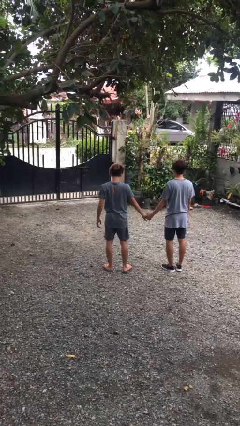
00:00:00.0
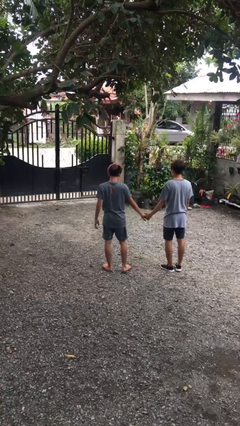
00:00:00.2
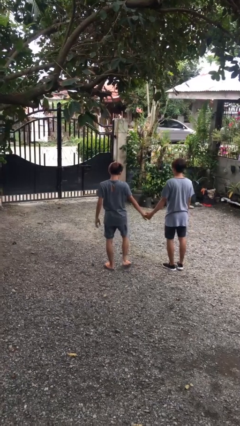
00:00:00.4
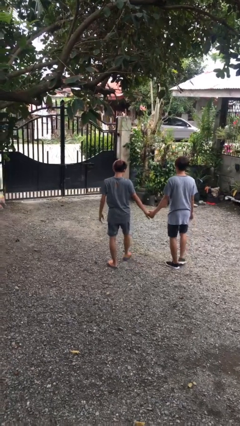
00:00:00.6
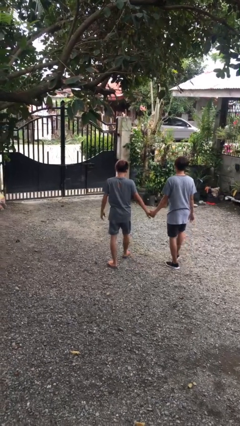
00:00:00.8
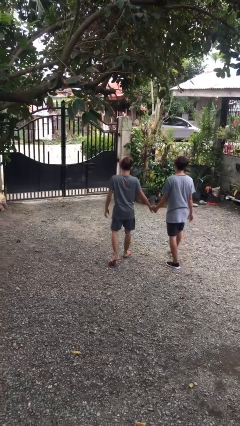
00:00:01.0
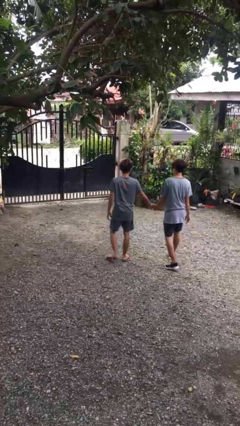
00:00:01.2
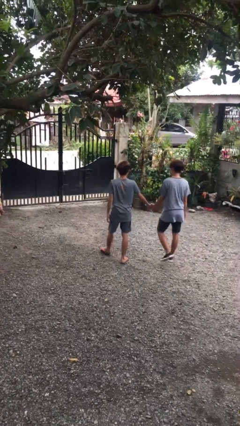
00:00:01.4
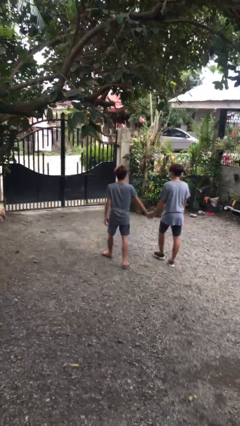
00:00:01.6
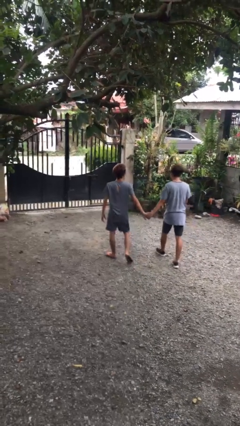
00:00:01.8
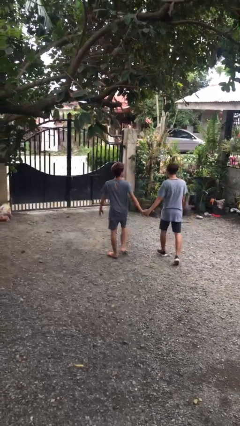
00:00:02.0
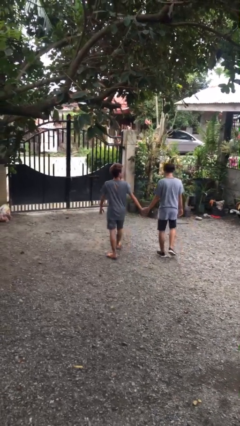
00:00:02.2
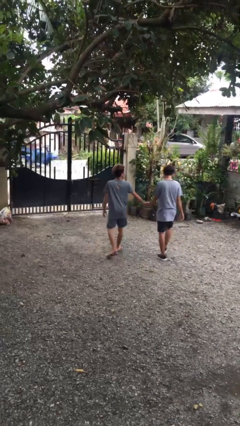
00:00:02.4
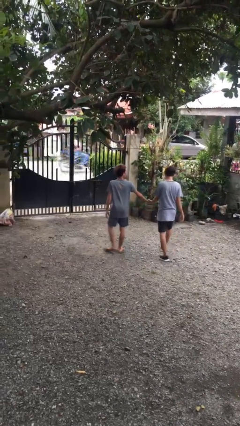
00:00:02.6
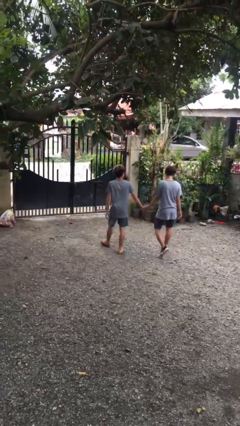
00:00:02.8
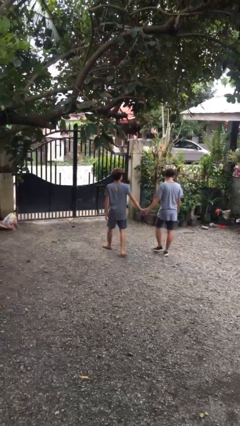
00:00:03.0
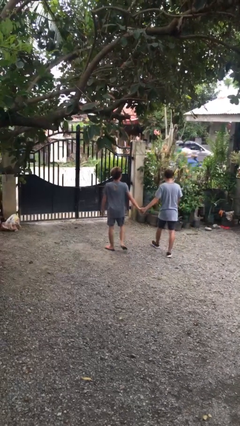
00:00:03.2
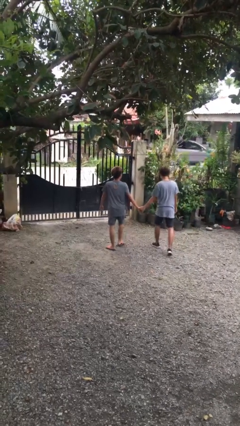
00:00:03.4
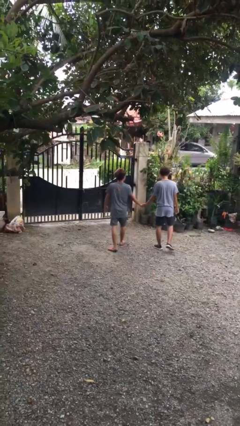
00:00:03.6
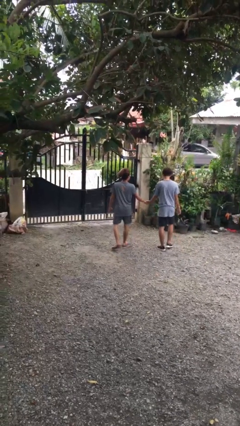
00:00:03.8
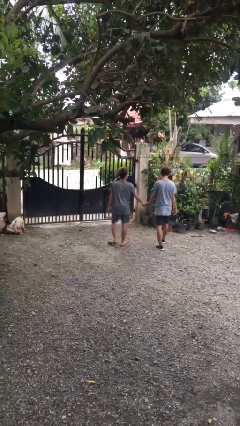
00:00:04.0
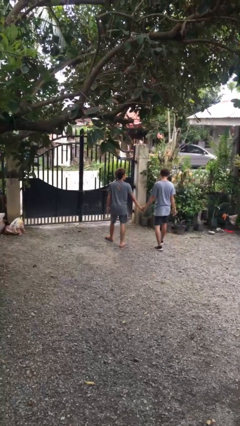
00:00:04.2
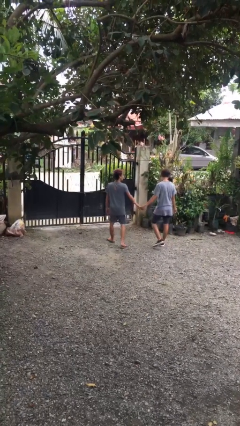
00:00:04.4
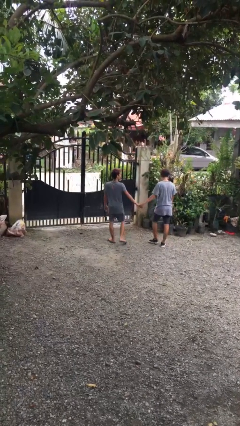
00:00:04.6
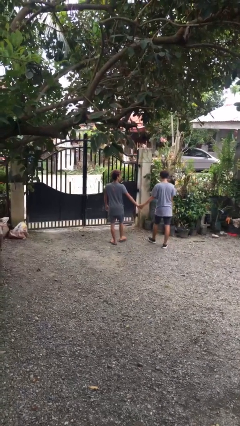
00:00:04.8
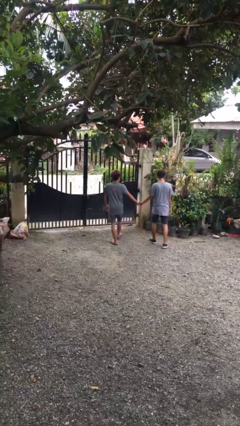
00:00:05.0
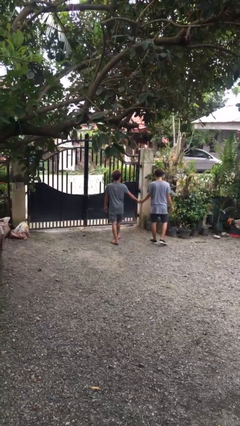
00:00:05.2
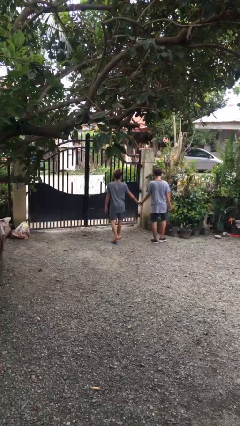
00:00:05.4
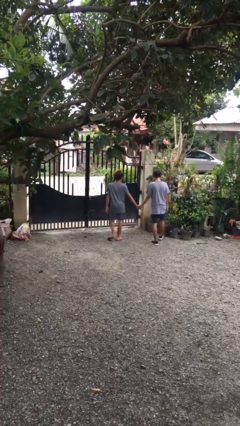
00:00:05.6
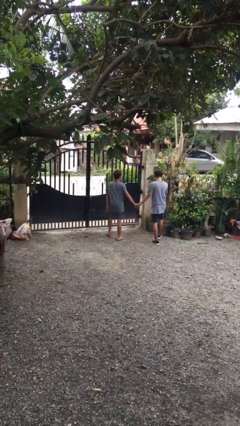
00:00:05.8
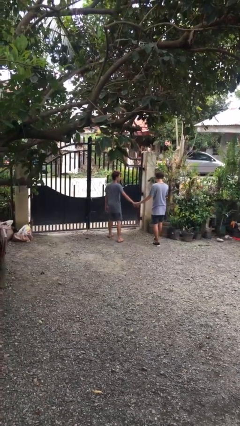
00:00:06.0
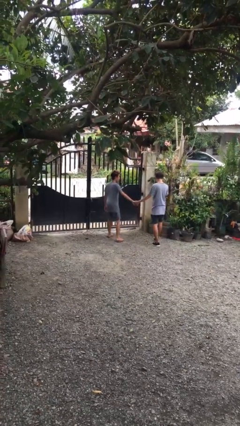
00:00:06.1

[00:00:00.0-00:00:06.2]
person holds hand

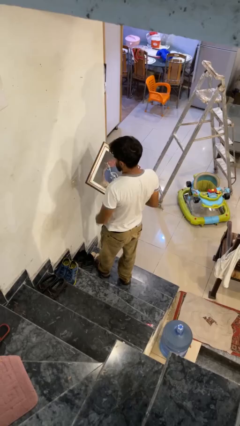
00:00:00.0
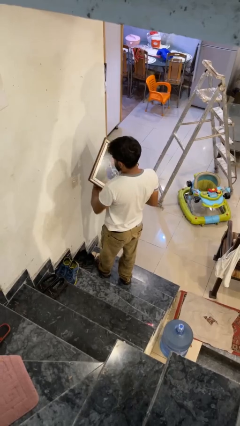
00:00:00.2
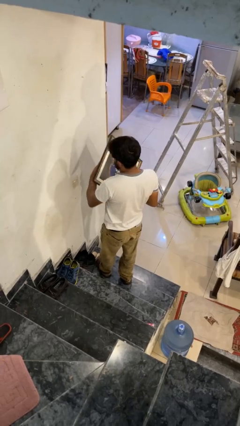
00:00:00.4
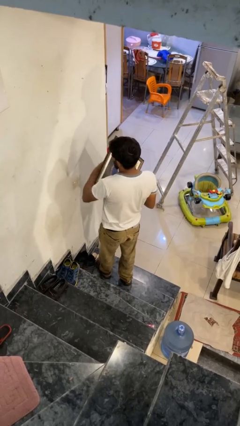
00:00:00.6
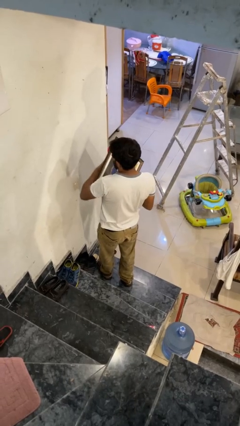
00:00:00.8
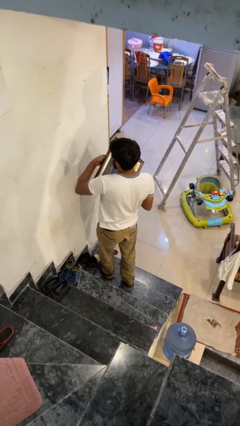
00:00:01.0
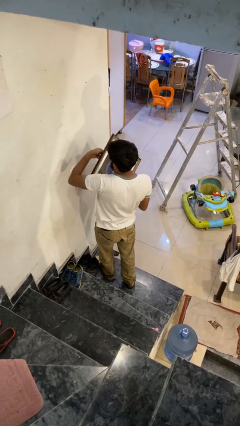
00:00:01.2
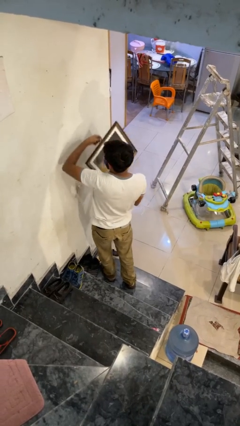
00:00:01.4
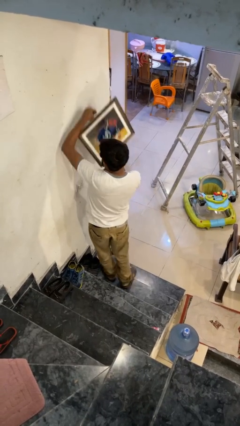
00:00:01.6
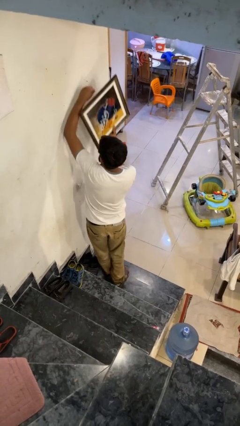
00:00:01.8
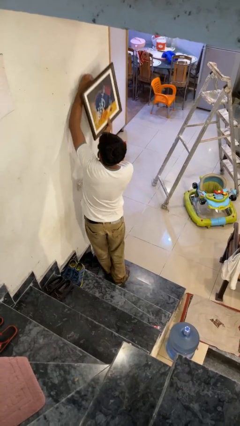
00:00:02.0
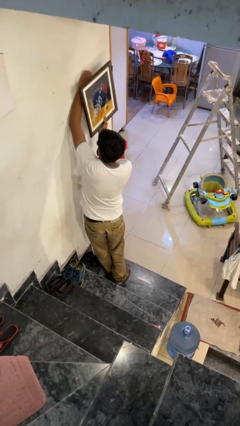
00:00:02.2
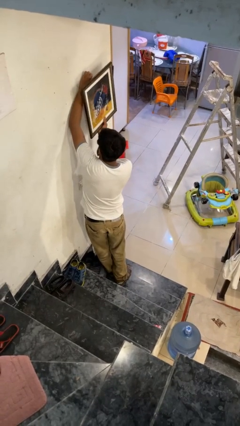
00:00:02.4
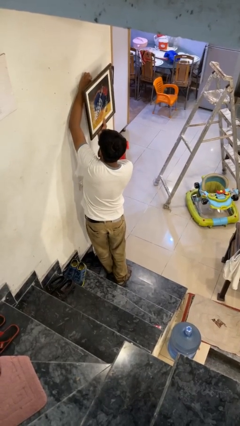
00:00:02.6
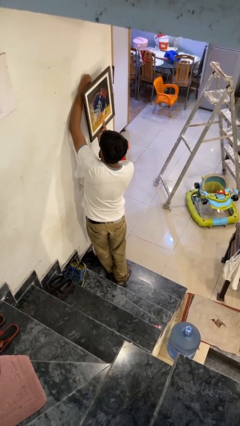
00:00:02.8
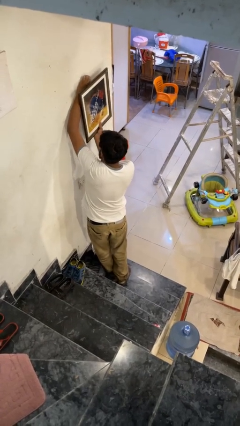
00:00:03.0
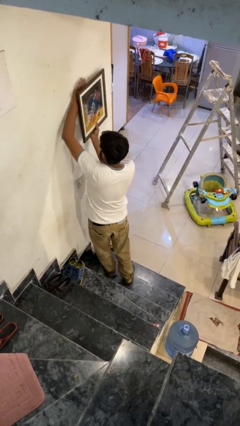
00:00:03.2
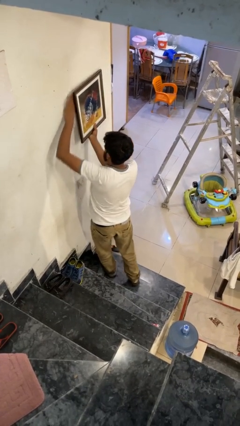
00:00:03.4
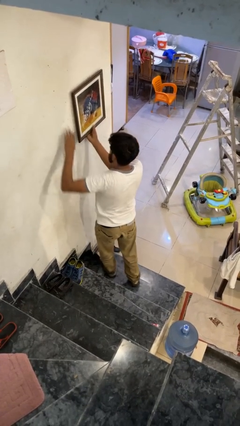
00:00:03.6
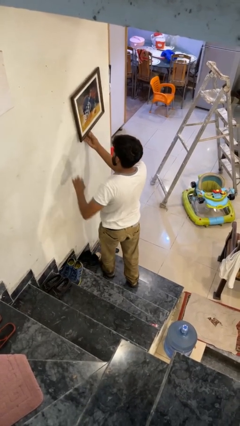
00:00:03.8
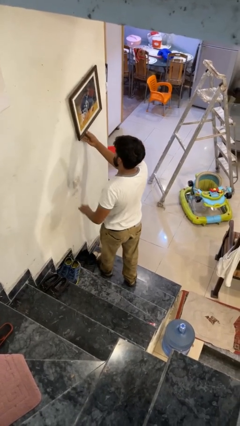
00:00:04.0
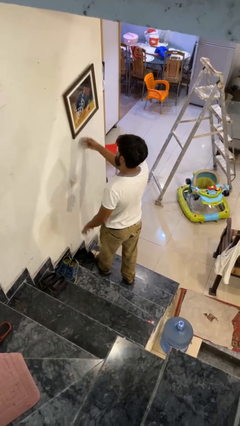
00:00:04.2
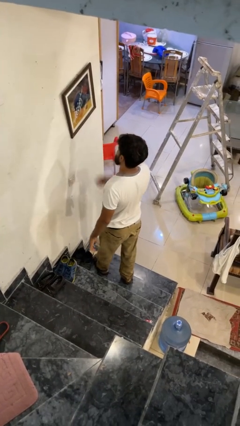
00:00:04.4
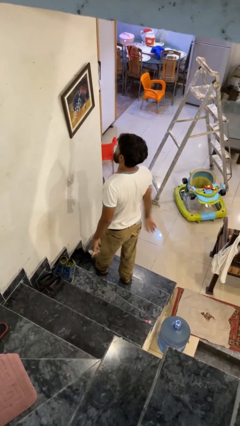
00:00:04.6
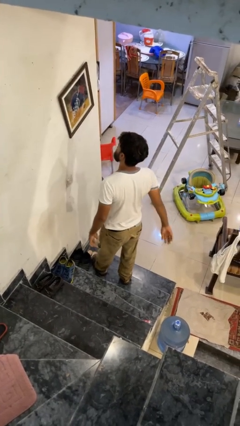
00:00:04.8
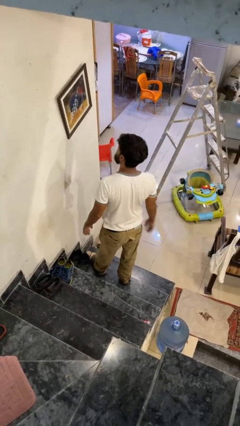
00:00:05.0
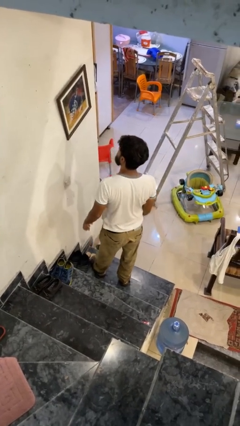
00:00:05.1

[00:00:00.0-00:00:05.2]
person puts up picture frame

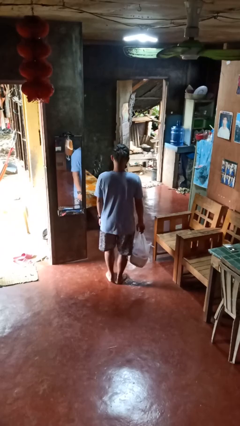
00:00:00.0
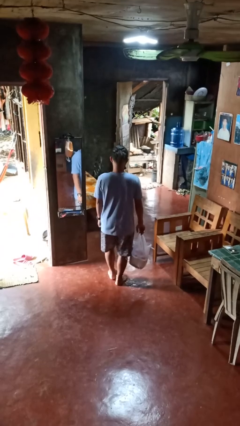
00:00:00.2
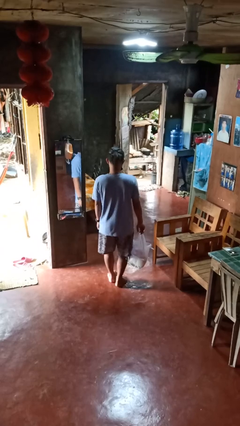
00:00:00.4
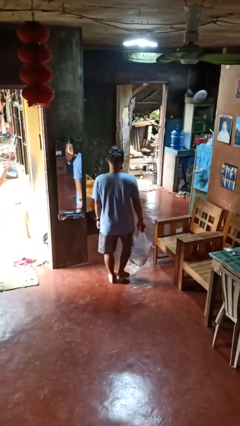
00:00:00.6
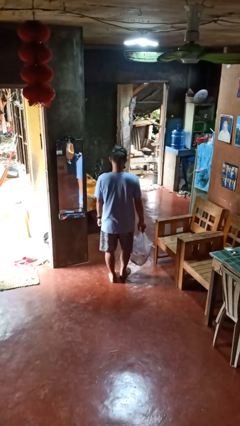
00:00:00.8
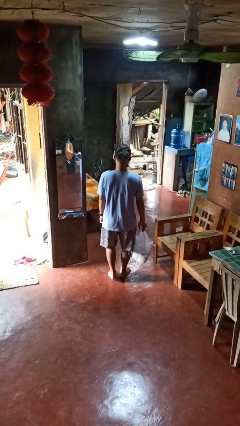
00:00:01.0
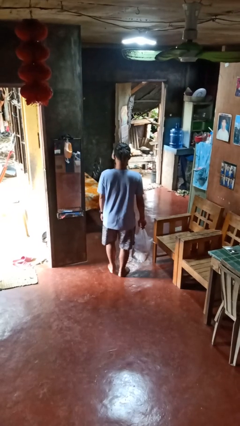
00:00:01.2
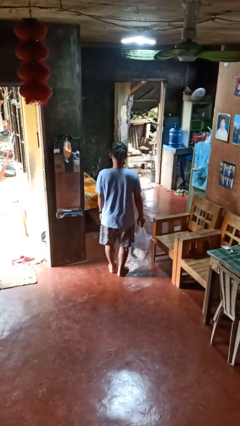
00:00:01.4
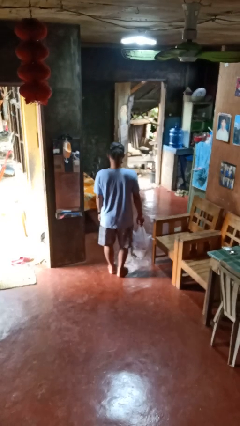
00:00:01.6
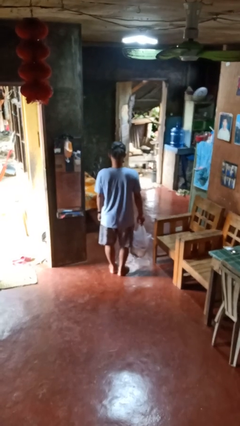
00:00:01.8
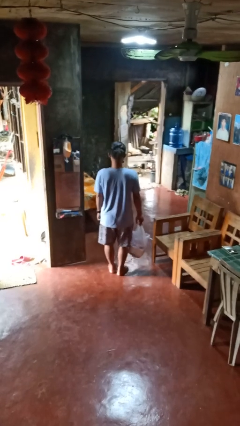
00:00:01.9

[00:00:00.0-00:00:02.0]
person carries groceries

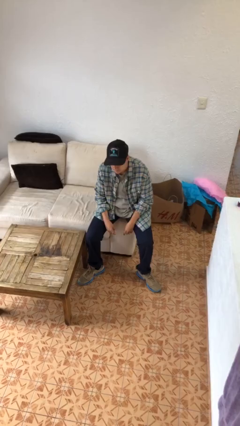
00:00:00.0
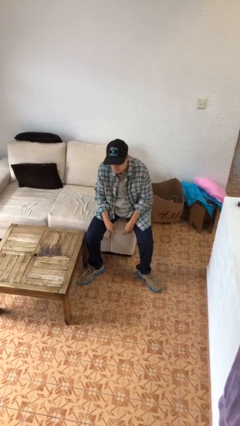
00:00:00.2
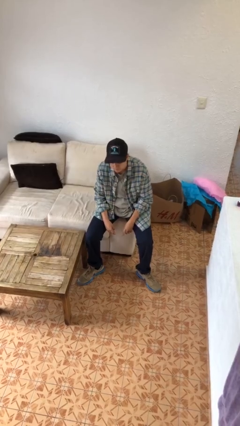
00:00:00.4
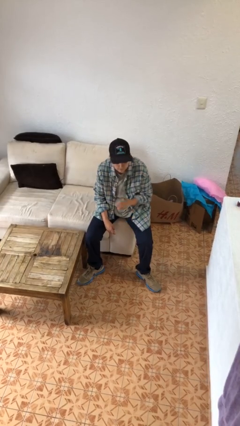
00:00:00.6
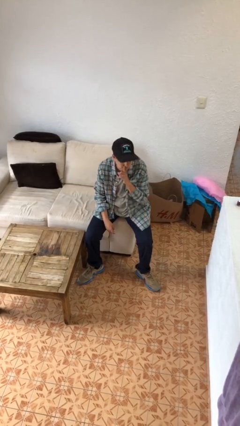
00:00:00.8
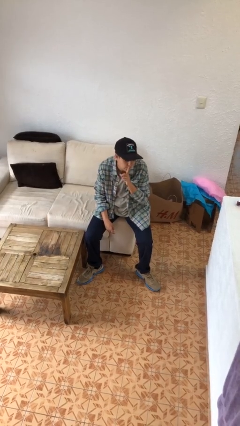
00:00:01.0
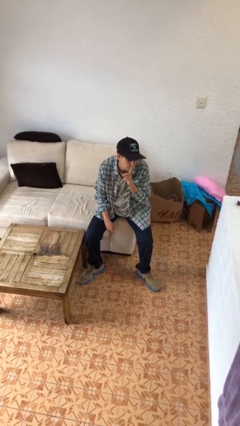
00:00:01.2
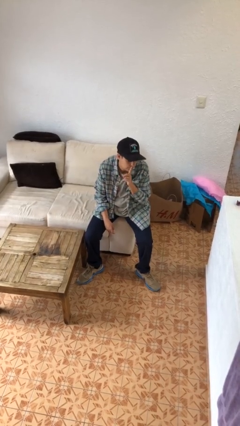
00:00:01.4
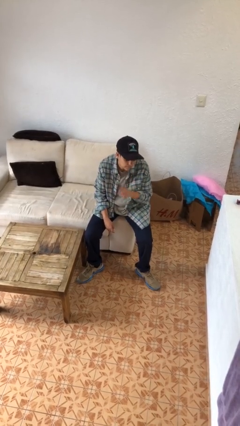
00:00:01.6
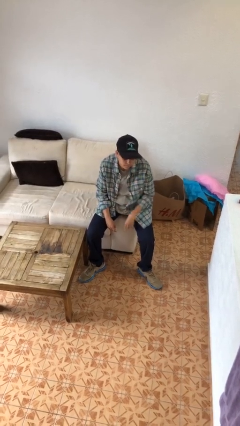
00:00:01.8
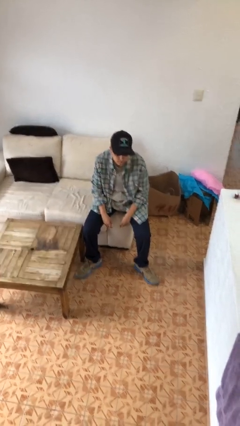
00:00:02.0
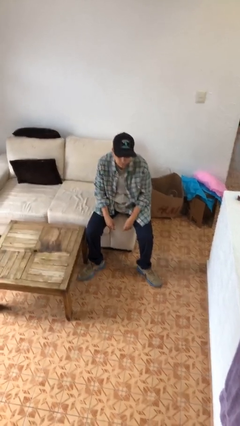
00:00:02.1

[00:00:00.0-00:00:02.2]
person gestures be quiet

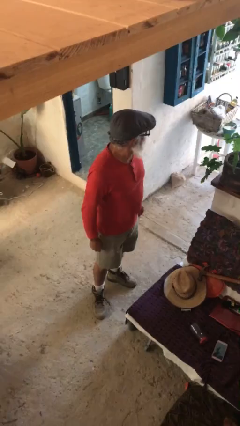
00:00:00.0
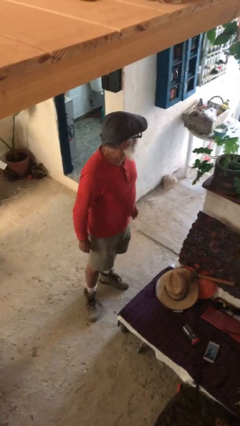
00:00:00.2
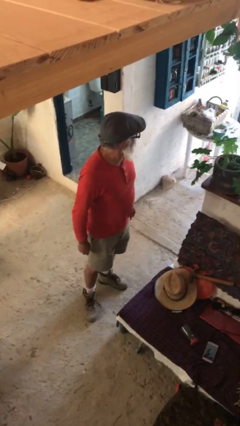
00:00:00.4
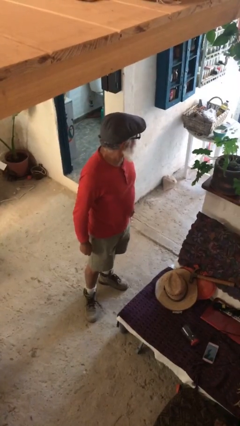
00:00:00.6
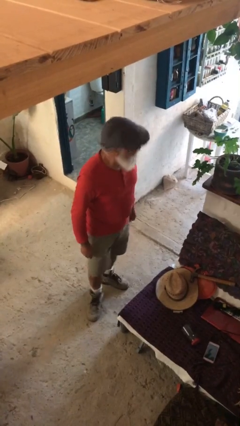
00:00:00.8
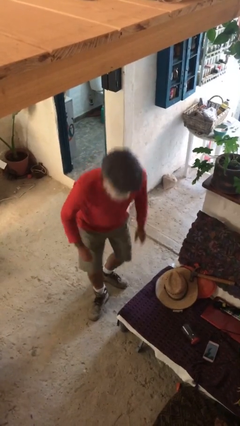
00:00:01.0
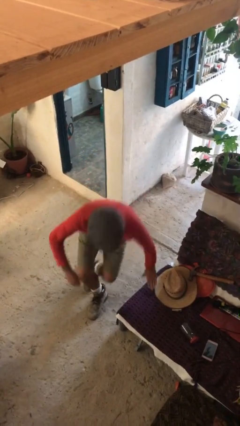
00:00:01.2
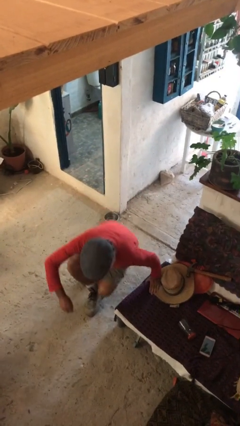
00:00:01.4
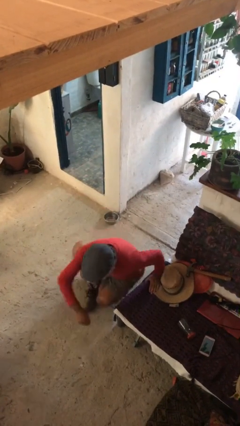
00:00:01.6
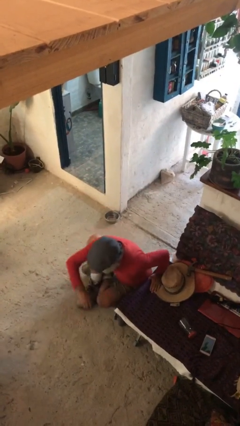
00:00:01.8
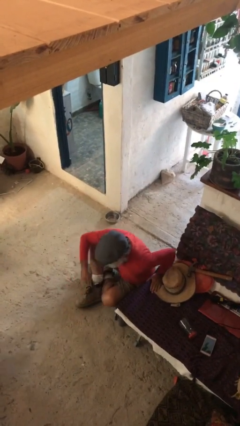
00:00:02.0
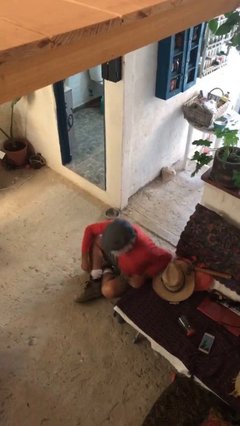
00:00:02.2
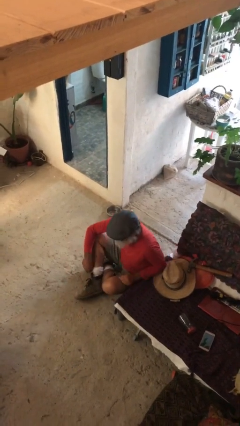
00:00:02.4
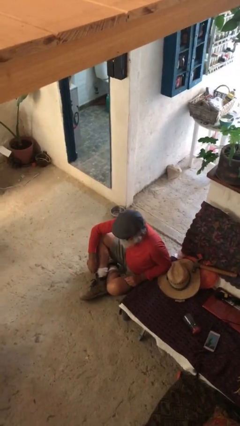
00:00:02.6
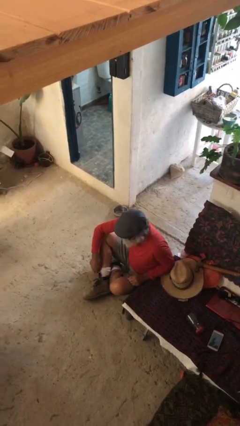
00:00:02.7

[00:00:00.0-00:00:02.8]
person sits down
